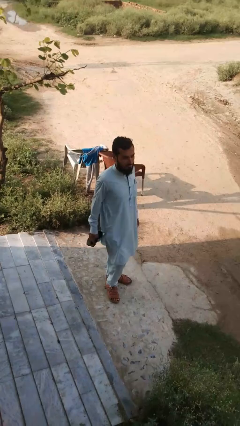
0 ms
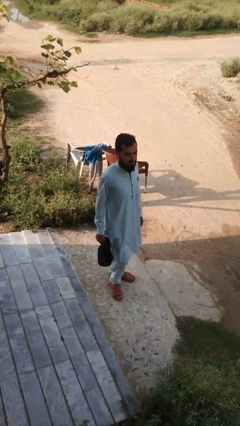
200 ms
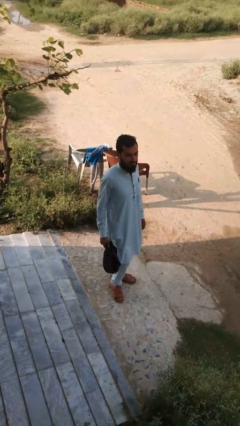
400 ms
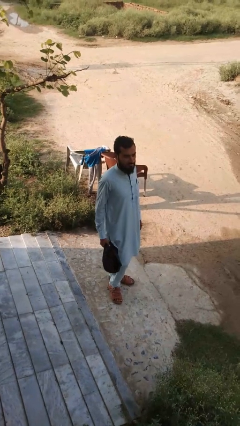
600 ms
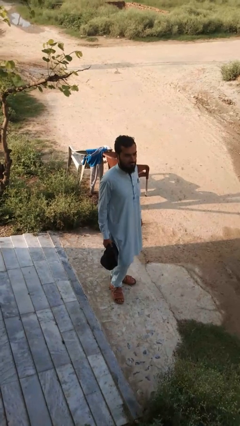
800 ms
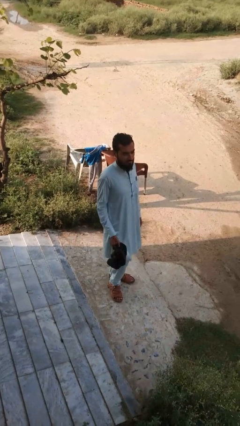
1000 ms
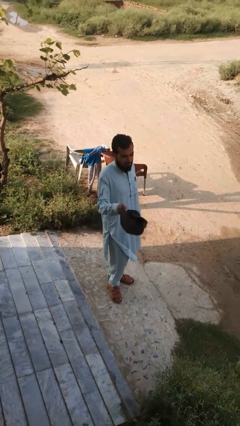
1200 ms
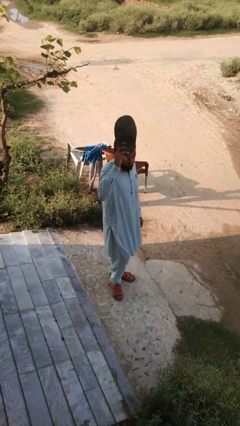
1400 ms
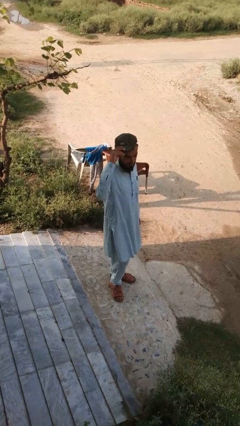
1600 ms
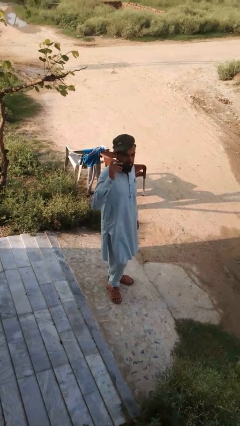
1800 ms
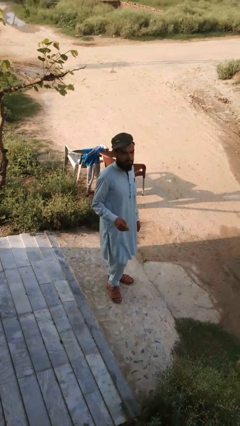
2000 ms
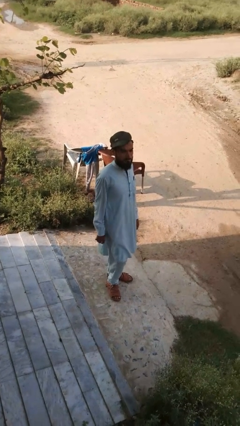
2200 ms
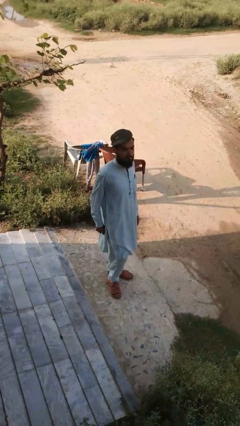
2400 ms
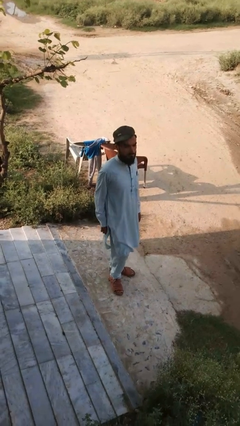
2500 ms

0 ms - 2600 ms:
person puts on hat

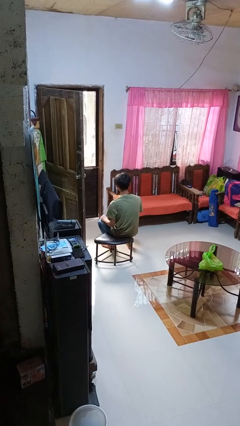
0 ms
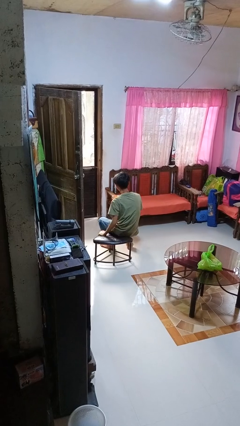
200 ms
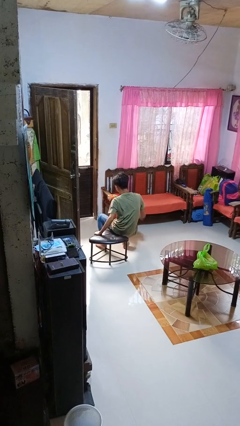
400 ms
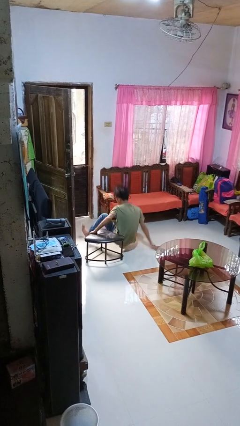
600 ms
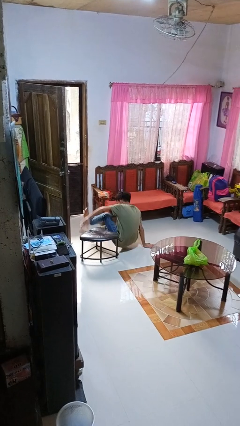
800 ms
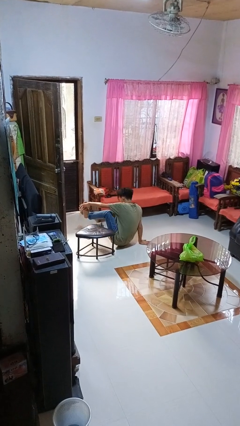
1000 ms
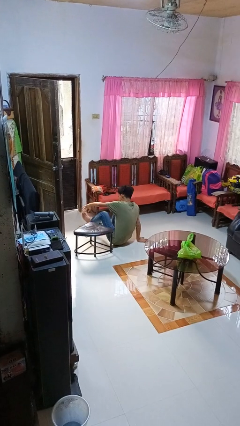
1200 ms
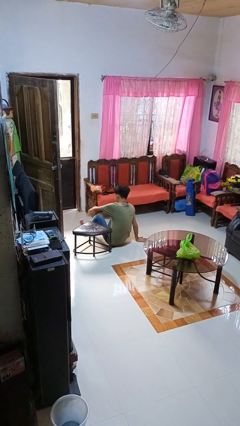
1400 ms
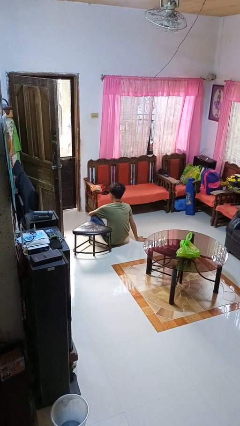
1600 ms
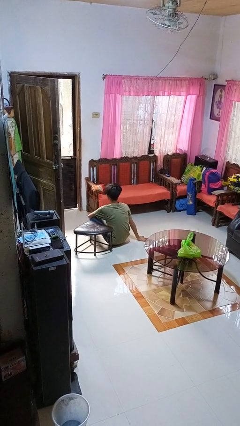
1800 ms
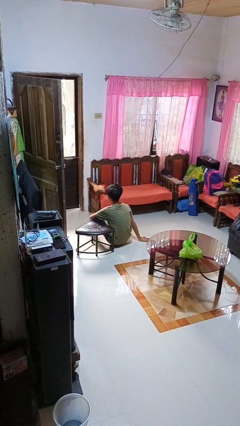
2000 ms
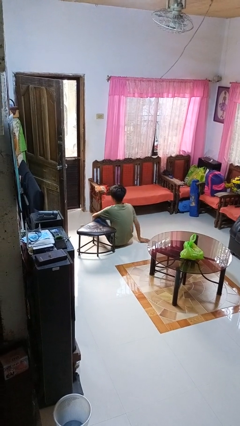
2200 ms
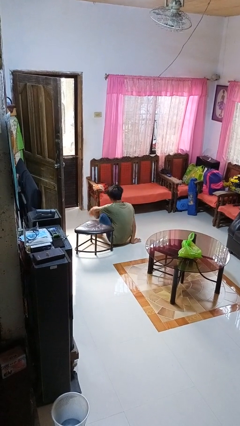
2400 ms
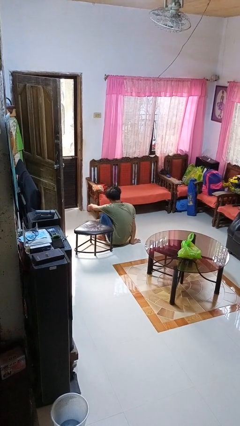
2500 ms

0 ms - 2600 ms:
person falls from chair

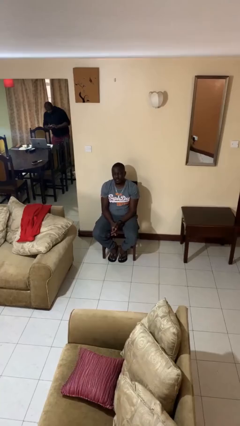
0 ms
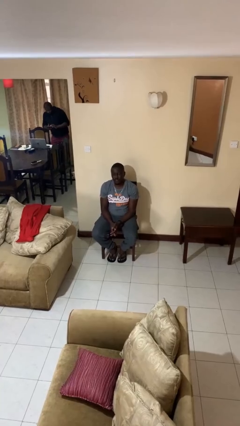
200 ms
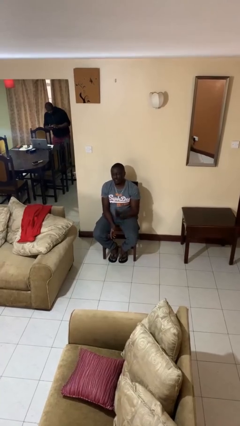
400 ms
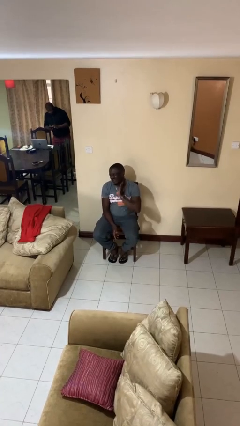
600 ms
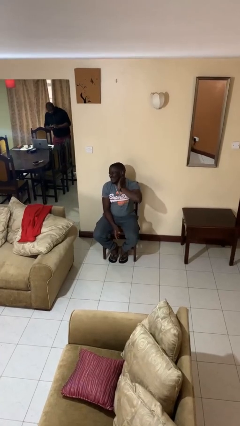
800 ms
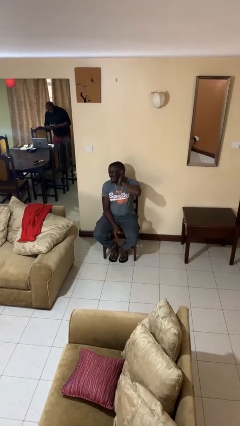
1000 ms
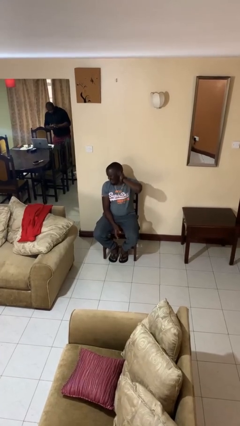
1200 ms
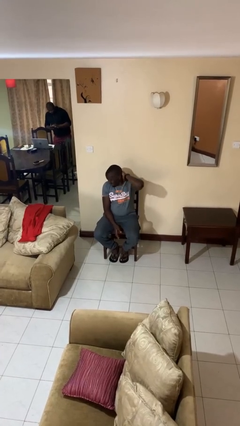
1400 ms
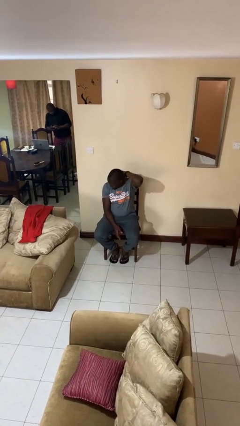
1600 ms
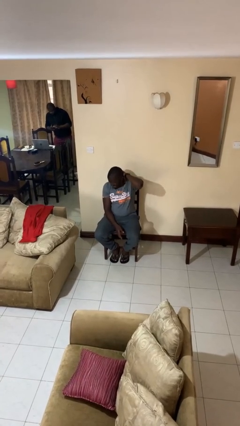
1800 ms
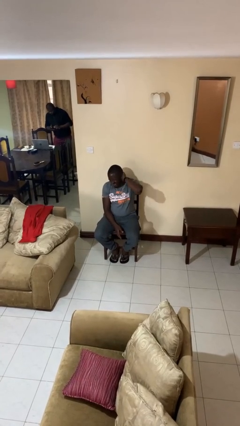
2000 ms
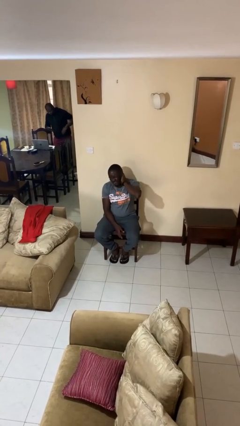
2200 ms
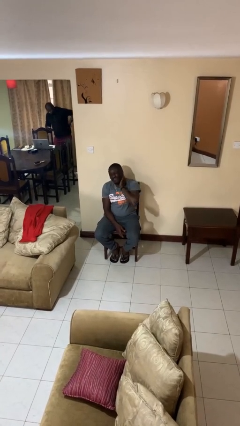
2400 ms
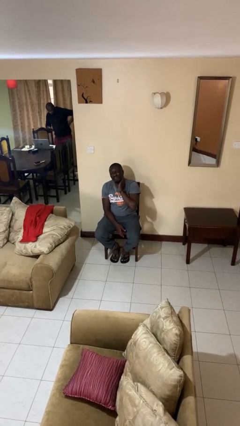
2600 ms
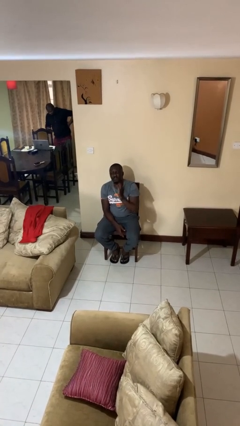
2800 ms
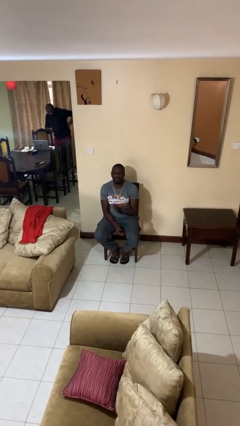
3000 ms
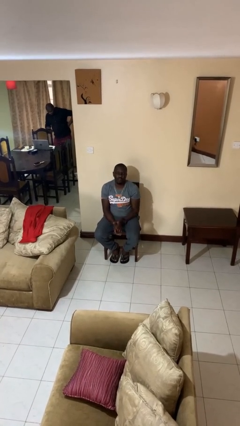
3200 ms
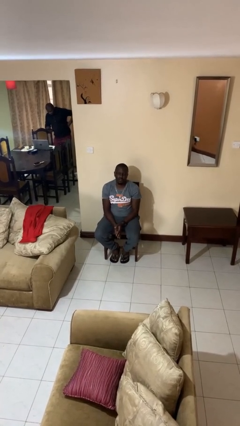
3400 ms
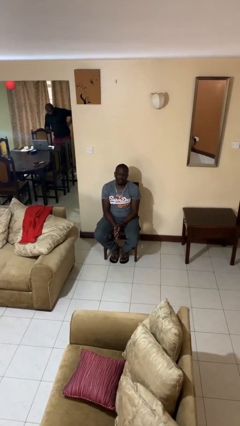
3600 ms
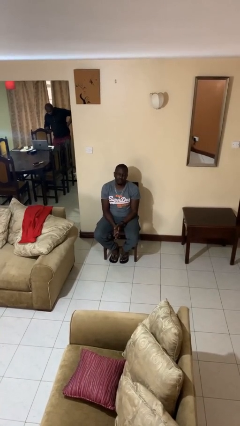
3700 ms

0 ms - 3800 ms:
person rubs neck

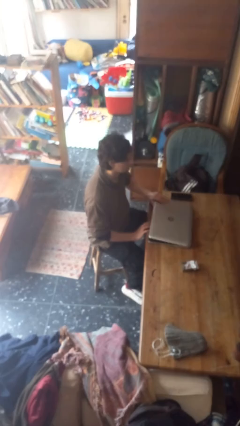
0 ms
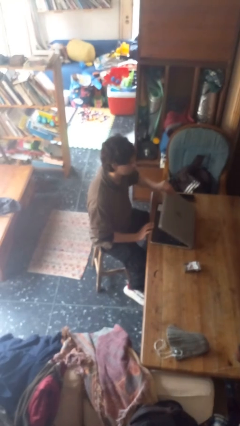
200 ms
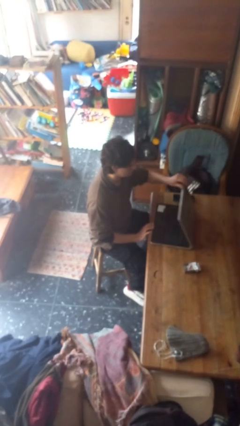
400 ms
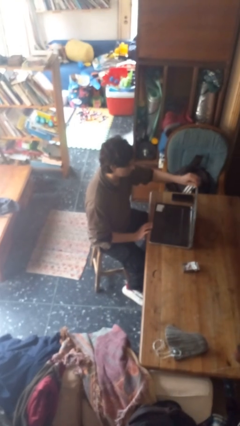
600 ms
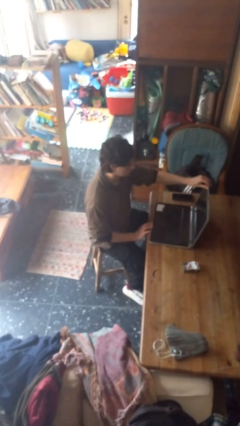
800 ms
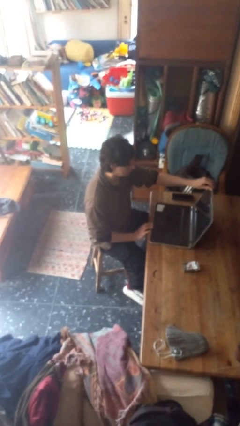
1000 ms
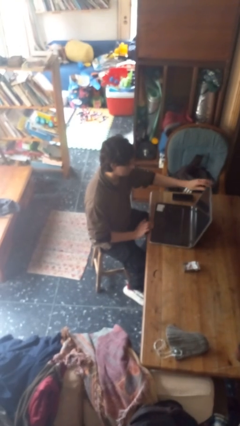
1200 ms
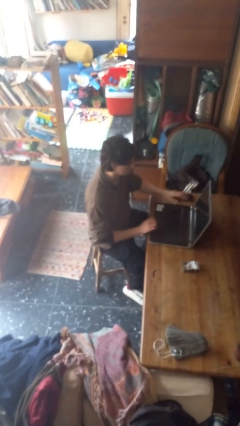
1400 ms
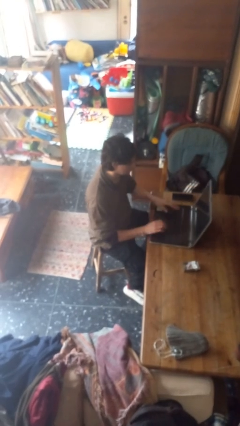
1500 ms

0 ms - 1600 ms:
person opens laptop

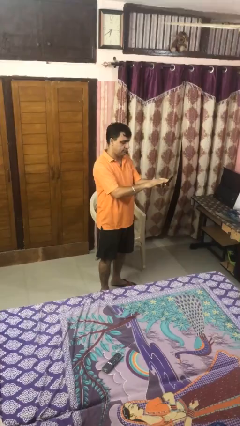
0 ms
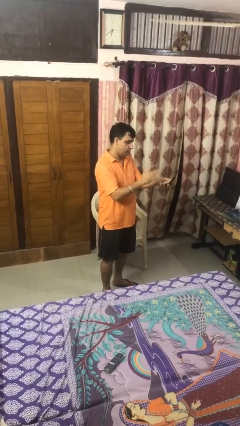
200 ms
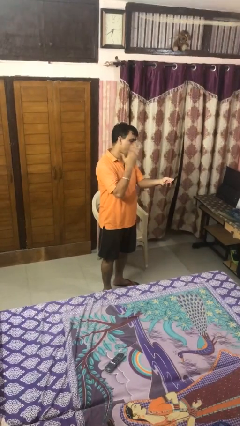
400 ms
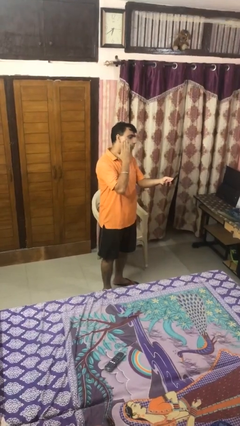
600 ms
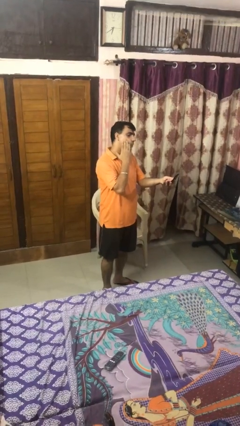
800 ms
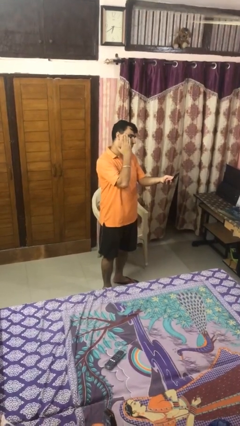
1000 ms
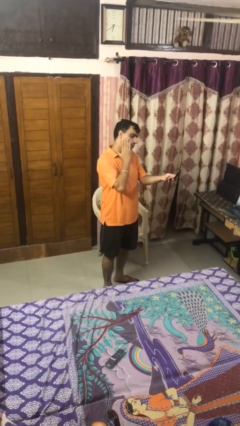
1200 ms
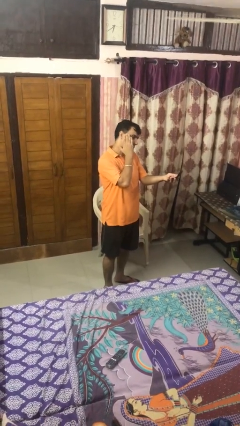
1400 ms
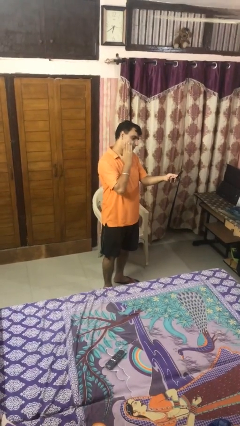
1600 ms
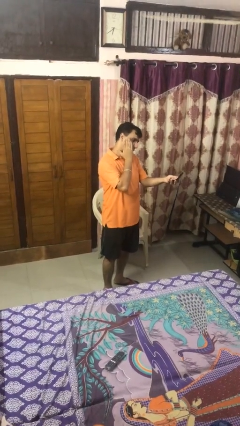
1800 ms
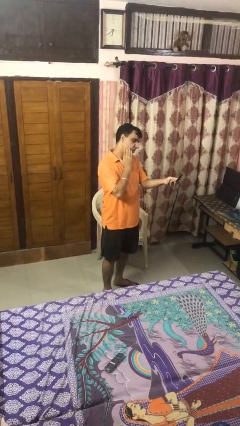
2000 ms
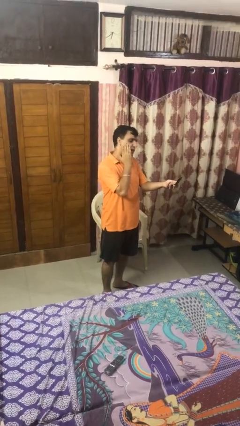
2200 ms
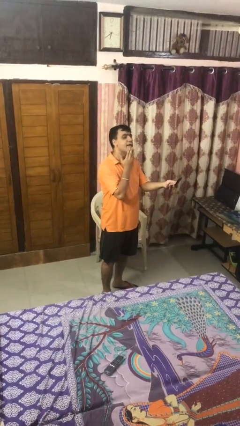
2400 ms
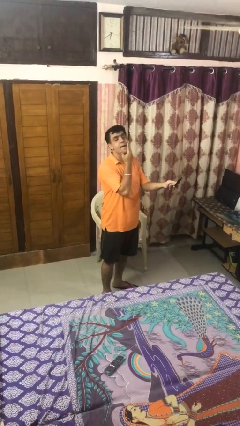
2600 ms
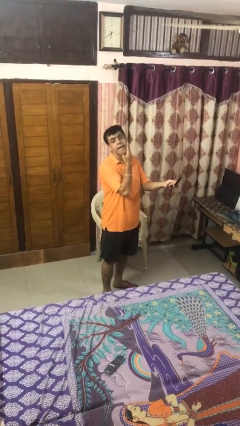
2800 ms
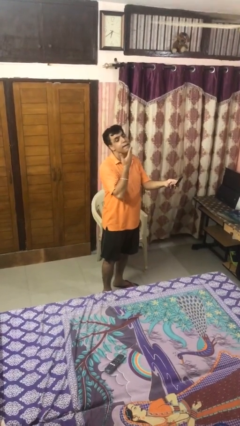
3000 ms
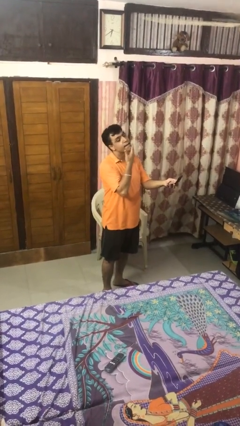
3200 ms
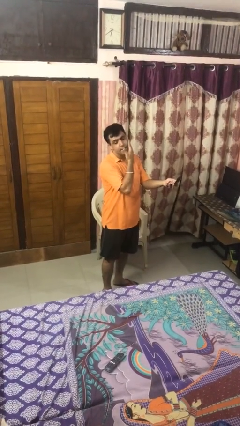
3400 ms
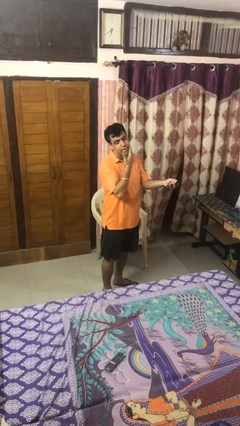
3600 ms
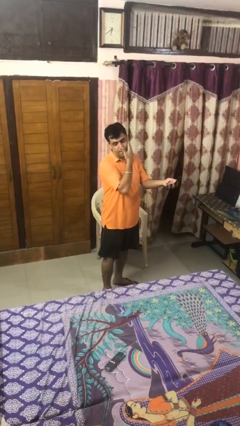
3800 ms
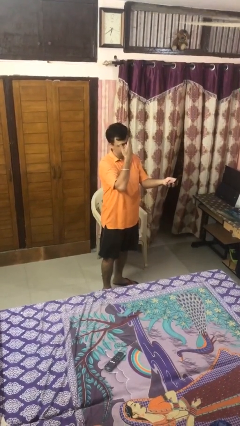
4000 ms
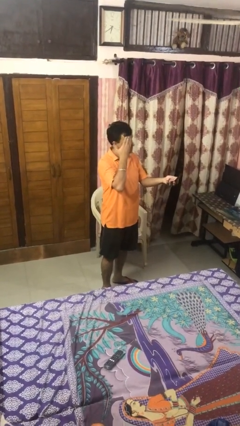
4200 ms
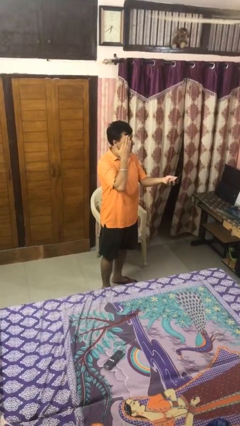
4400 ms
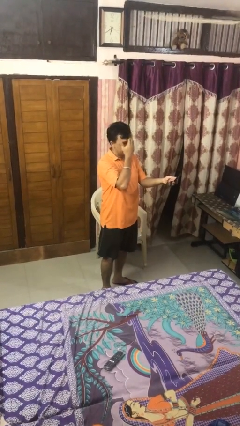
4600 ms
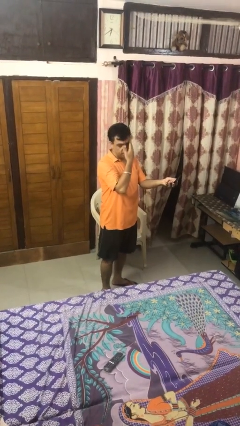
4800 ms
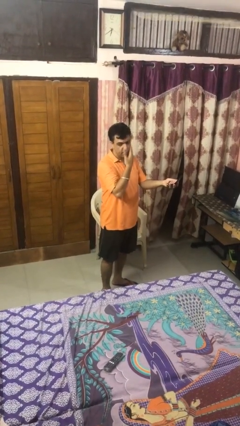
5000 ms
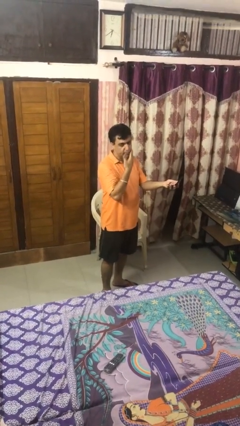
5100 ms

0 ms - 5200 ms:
person applies foundation makeup

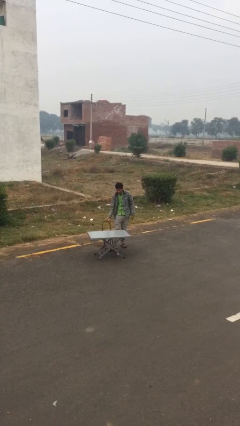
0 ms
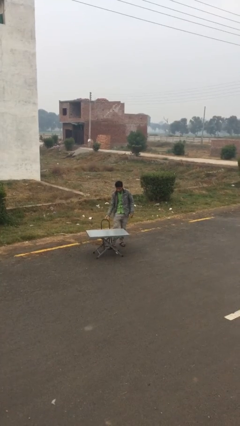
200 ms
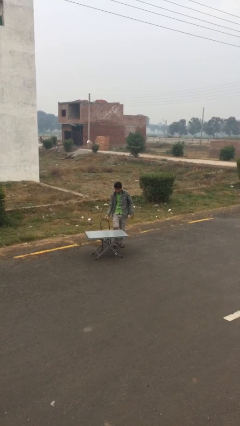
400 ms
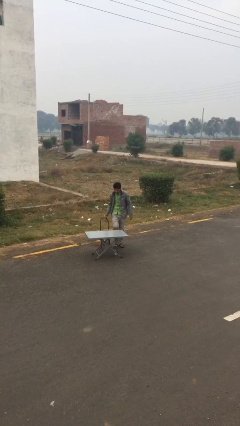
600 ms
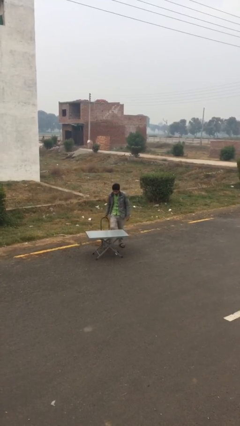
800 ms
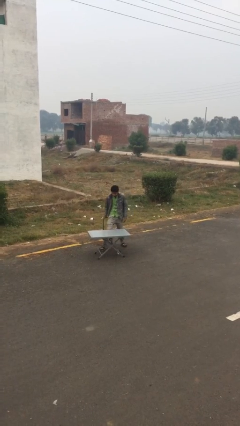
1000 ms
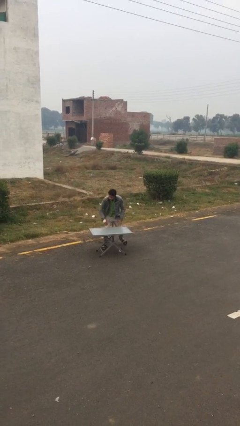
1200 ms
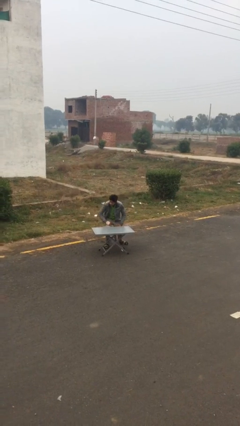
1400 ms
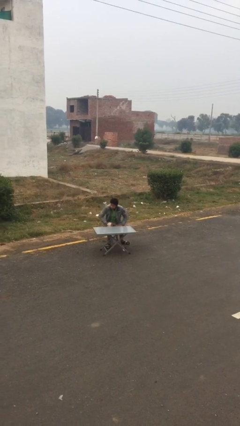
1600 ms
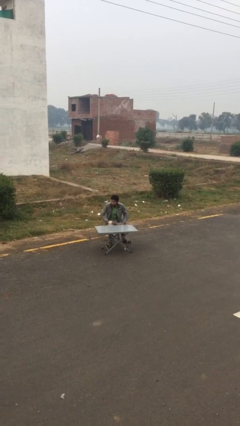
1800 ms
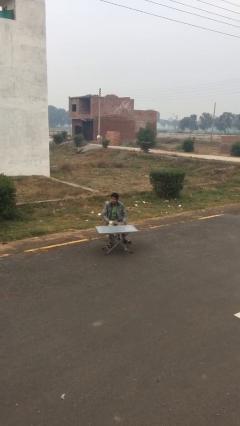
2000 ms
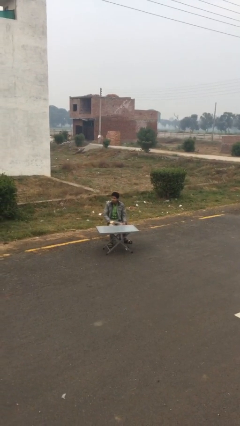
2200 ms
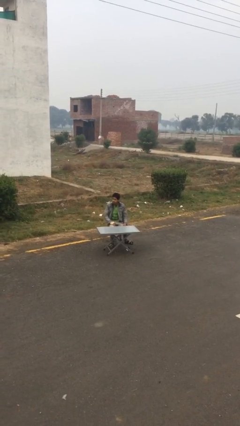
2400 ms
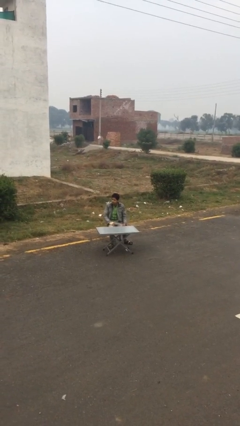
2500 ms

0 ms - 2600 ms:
person sits down
